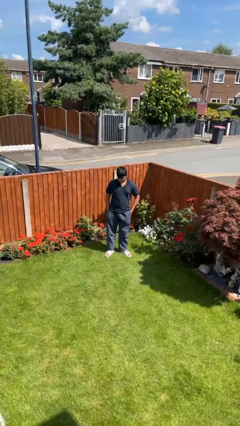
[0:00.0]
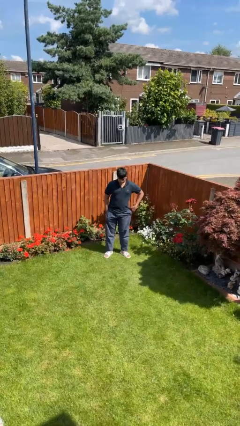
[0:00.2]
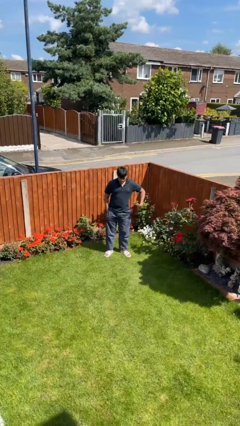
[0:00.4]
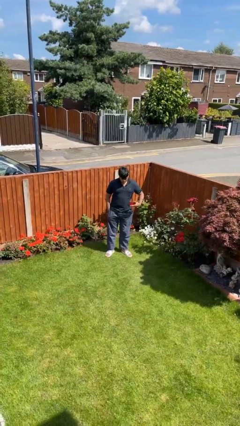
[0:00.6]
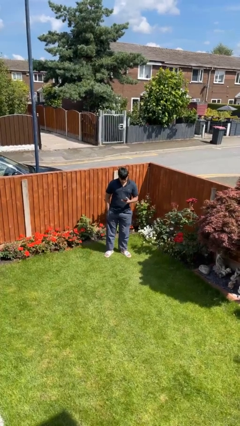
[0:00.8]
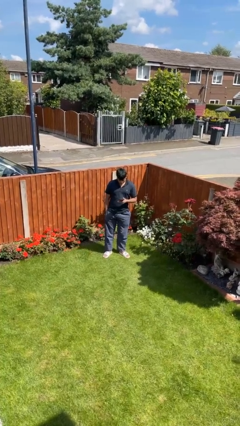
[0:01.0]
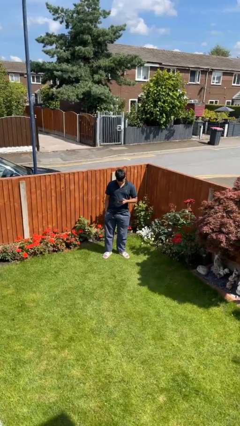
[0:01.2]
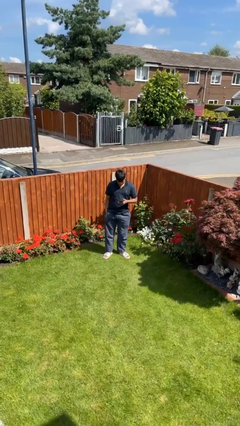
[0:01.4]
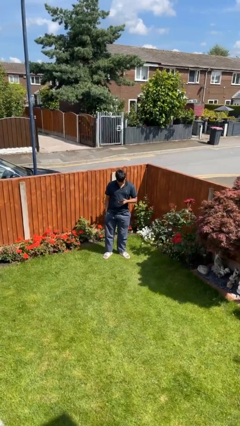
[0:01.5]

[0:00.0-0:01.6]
person takes phone from pocket

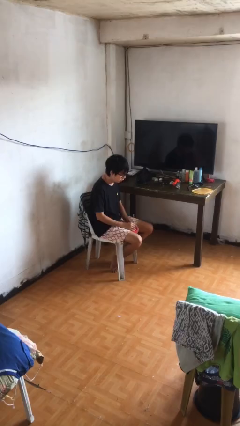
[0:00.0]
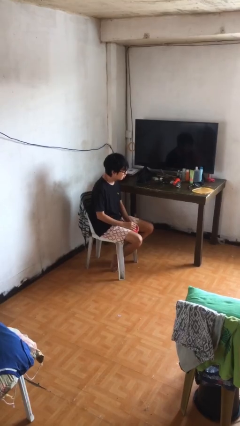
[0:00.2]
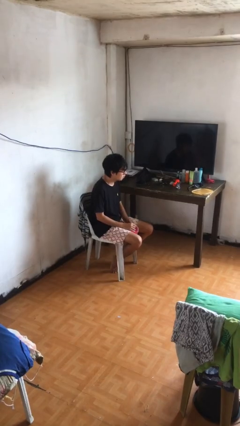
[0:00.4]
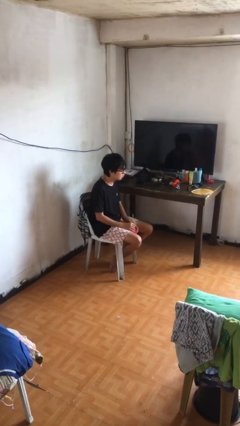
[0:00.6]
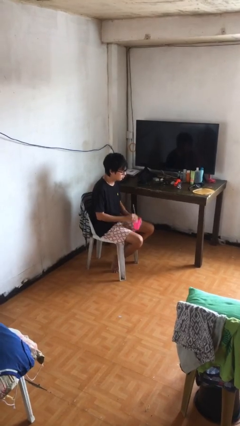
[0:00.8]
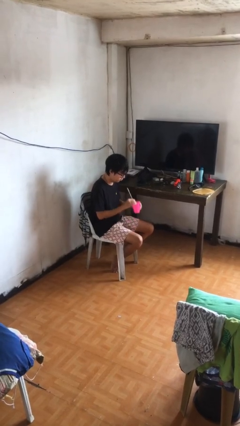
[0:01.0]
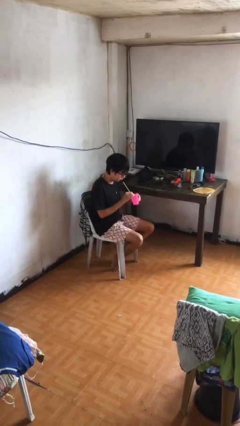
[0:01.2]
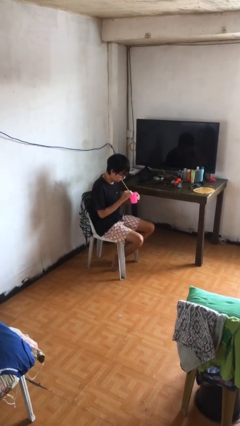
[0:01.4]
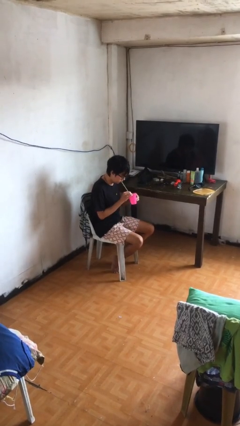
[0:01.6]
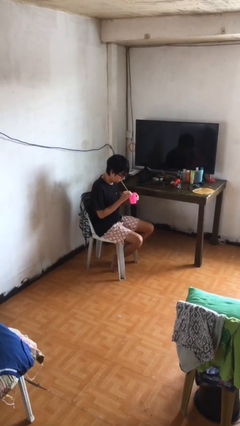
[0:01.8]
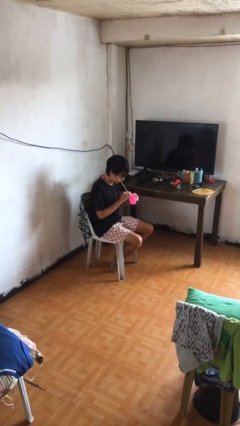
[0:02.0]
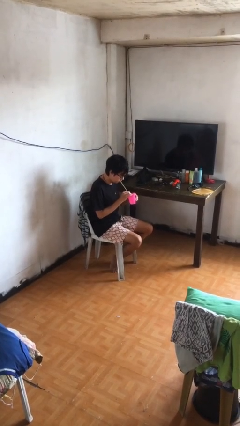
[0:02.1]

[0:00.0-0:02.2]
person drinks from straw

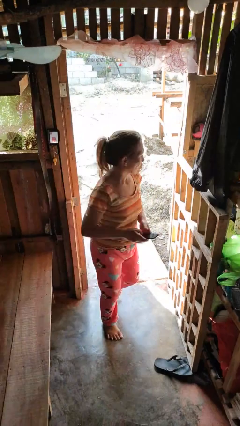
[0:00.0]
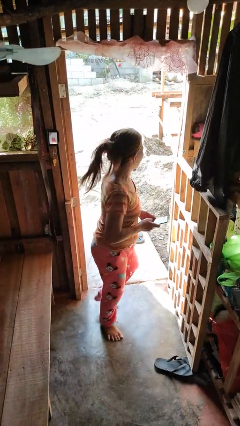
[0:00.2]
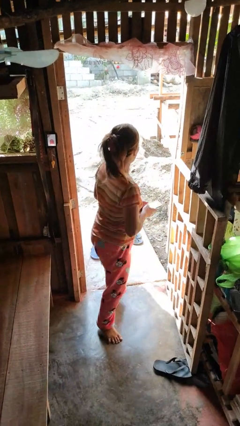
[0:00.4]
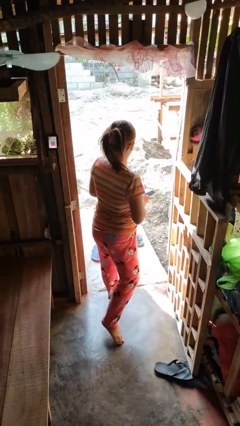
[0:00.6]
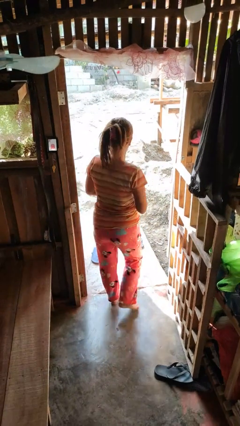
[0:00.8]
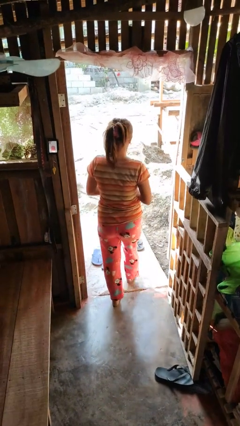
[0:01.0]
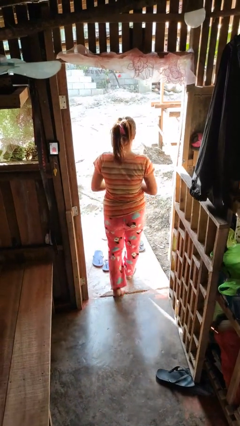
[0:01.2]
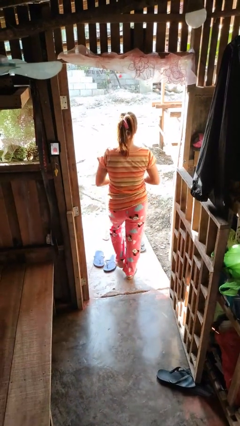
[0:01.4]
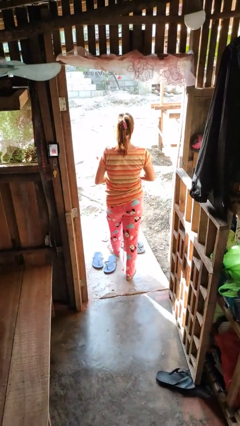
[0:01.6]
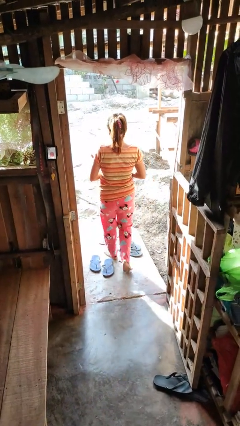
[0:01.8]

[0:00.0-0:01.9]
person exits scene through structure

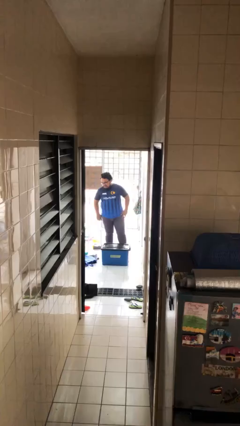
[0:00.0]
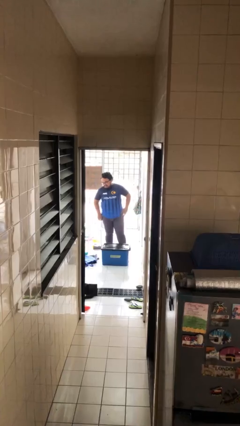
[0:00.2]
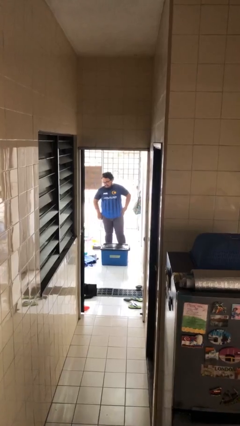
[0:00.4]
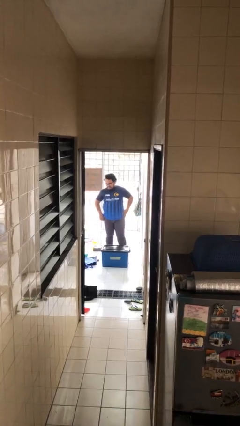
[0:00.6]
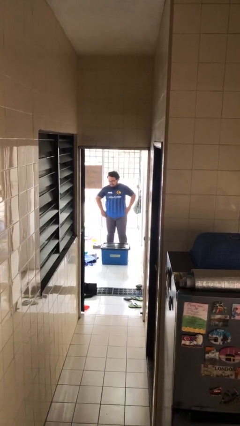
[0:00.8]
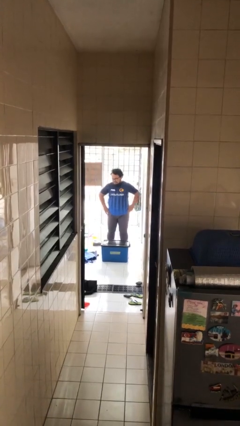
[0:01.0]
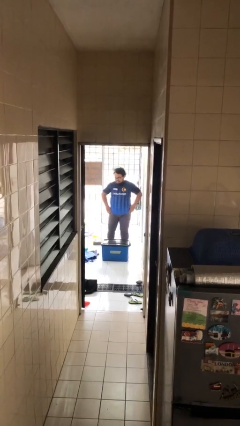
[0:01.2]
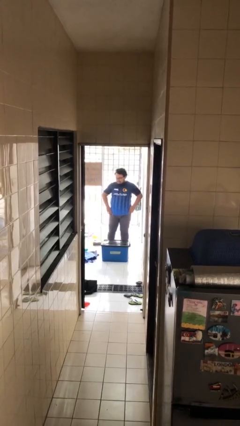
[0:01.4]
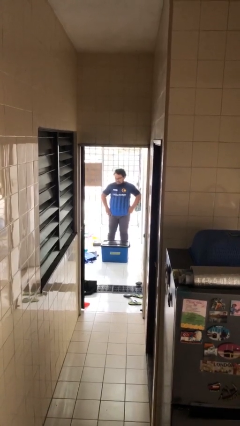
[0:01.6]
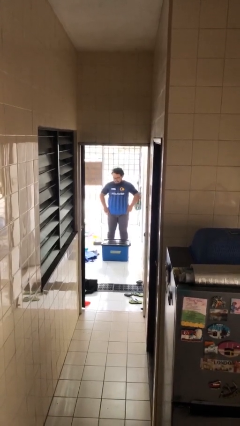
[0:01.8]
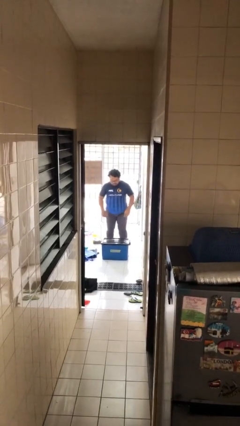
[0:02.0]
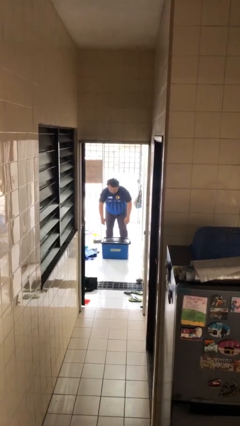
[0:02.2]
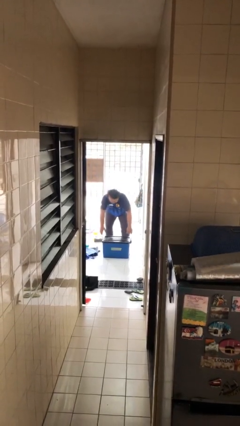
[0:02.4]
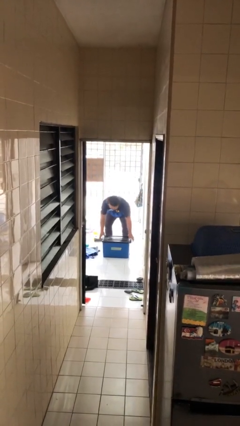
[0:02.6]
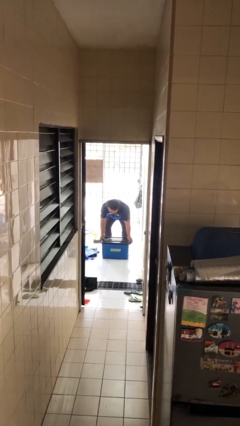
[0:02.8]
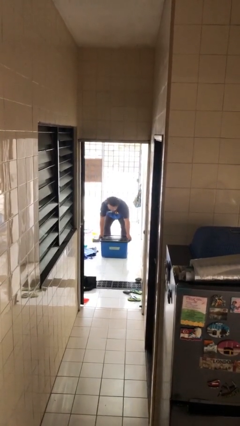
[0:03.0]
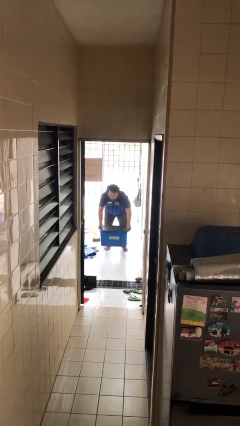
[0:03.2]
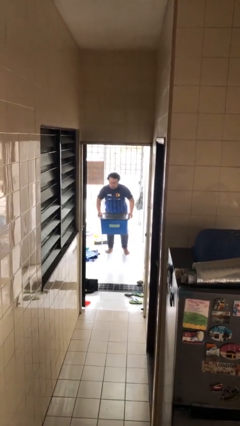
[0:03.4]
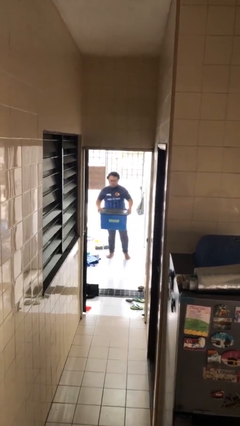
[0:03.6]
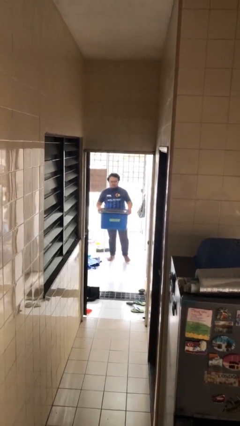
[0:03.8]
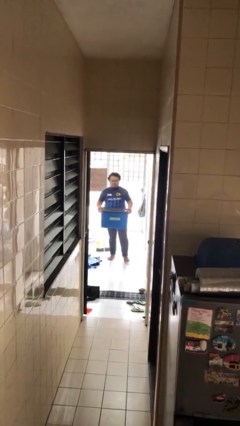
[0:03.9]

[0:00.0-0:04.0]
person picks up object from floor

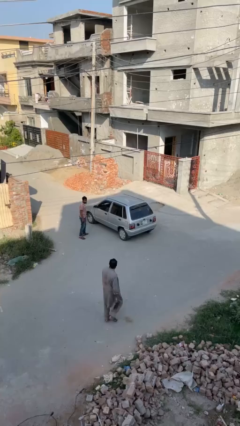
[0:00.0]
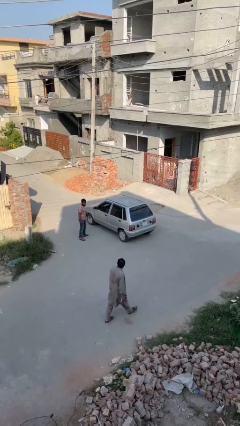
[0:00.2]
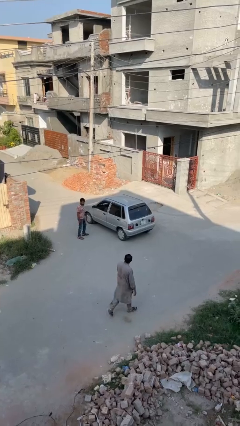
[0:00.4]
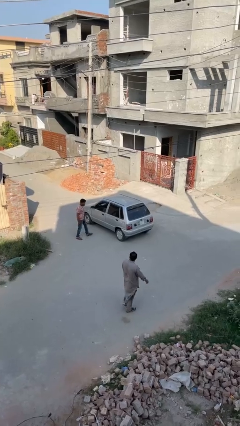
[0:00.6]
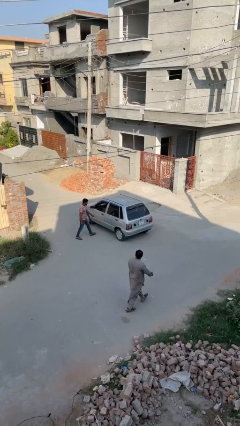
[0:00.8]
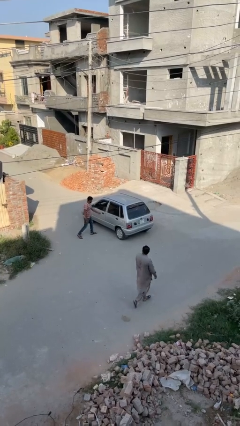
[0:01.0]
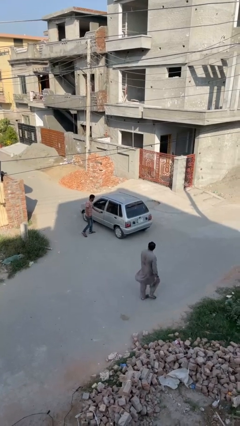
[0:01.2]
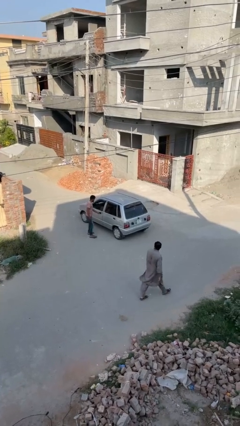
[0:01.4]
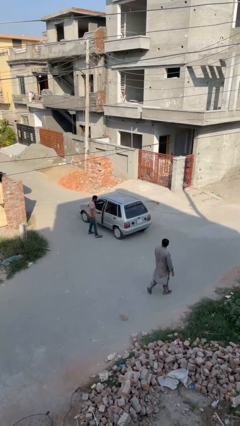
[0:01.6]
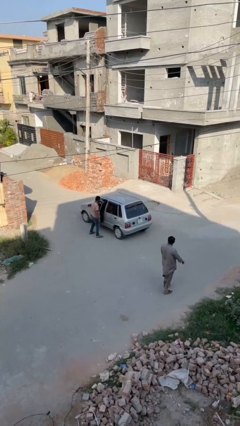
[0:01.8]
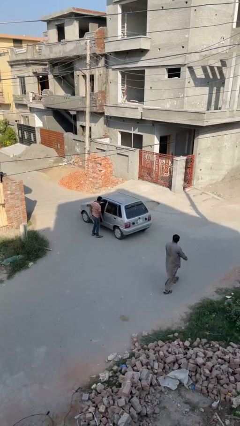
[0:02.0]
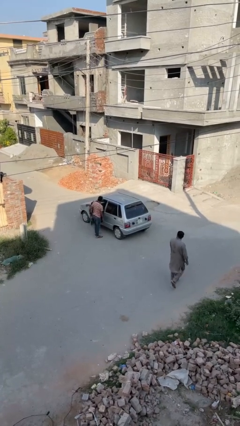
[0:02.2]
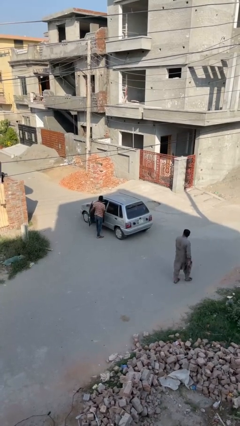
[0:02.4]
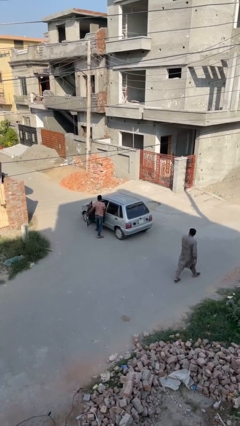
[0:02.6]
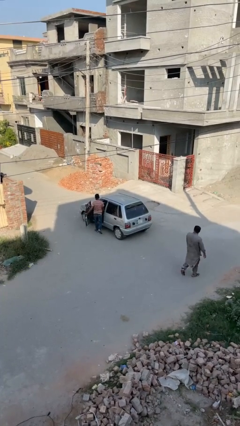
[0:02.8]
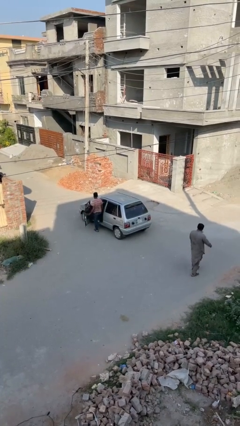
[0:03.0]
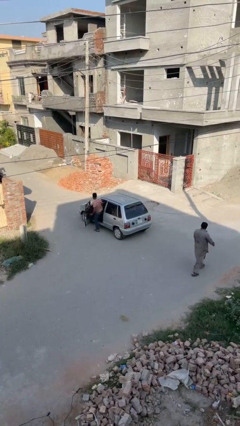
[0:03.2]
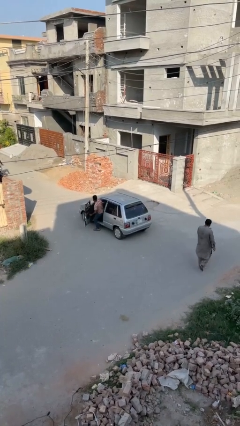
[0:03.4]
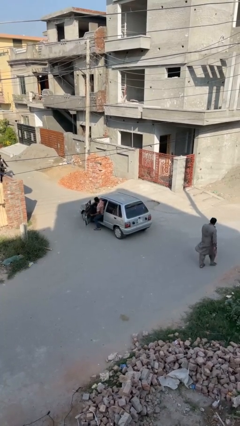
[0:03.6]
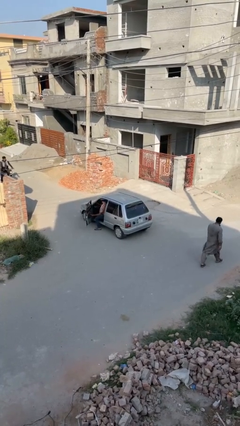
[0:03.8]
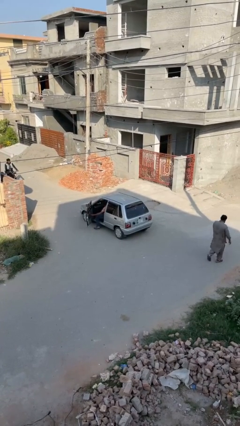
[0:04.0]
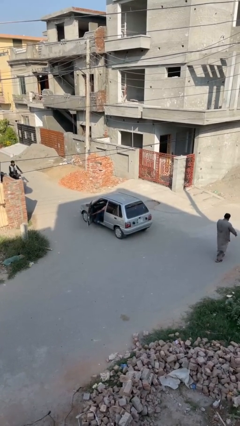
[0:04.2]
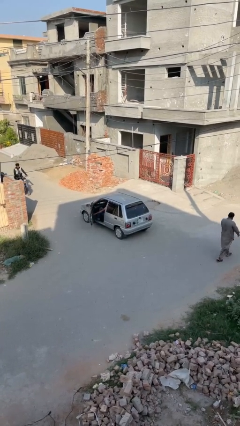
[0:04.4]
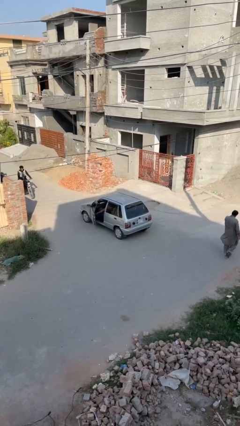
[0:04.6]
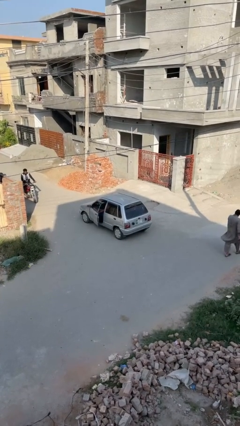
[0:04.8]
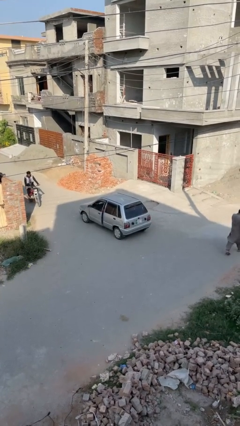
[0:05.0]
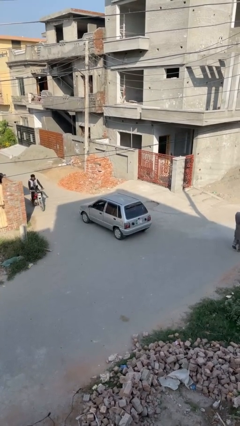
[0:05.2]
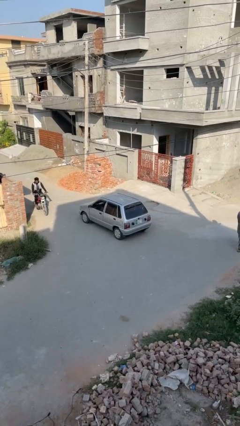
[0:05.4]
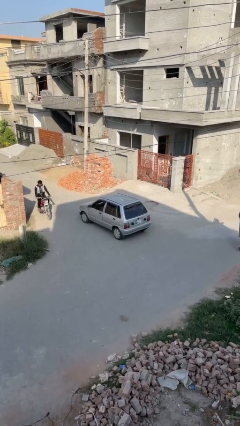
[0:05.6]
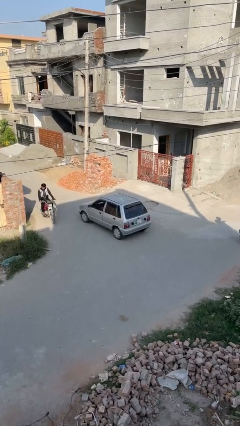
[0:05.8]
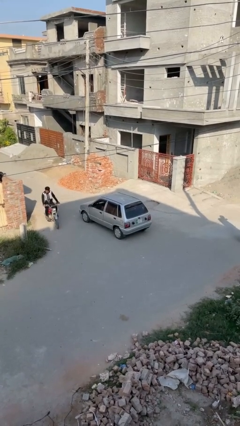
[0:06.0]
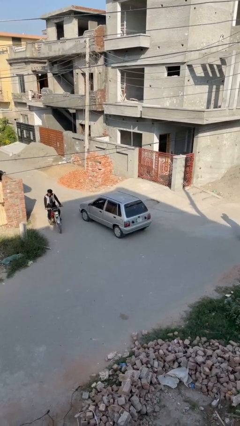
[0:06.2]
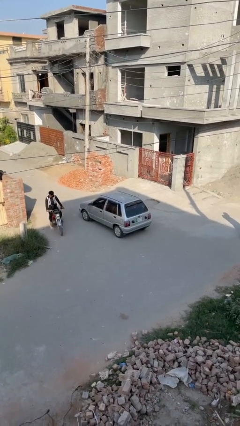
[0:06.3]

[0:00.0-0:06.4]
car picks up person

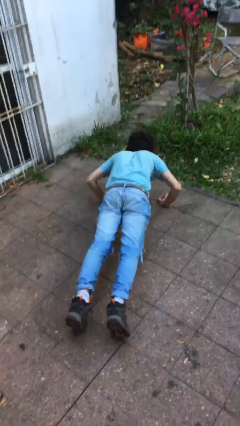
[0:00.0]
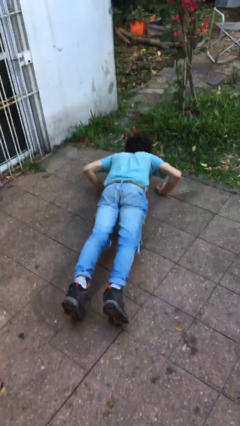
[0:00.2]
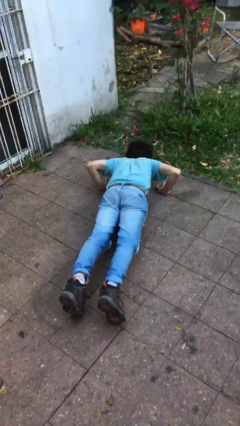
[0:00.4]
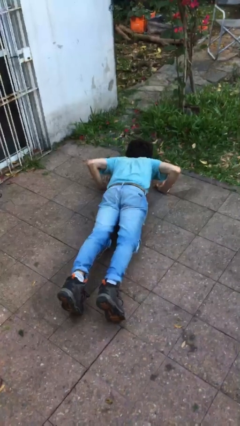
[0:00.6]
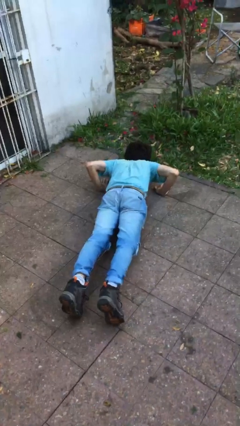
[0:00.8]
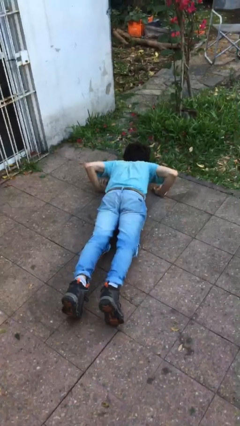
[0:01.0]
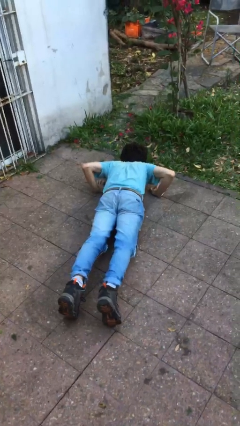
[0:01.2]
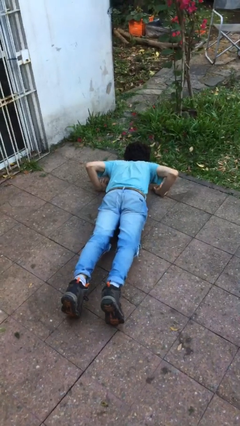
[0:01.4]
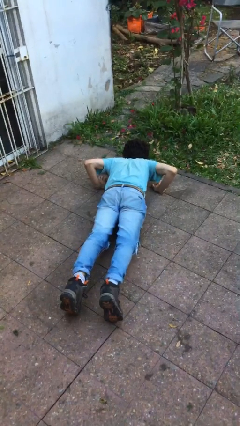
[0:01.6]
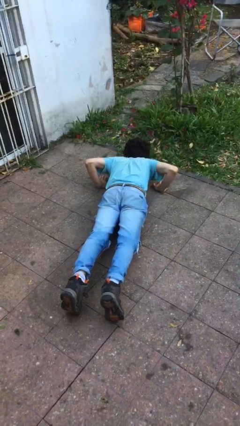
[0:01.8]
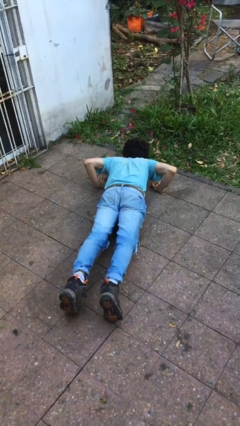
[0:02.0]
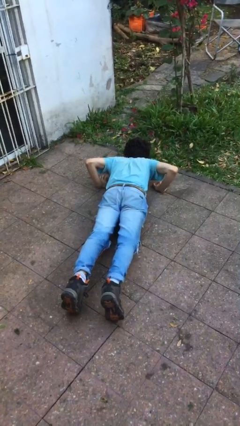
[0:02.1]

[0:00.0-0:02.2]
person exercises with pushup
